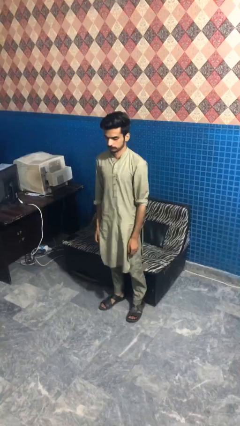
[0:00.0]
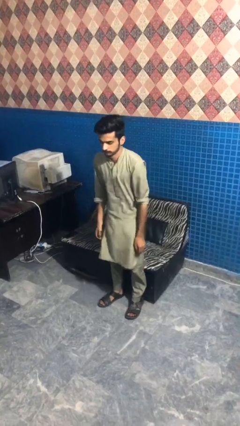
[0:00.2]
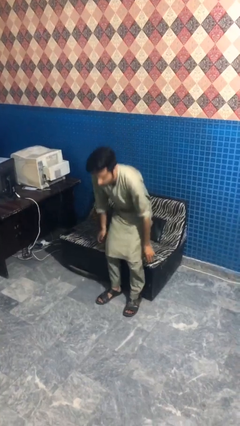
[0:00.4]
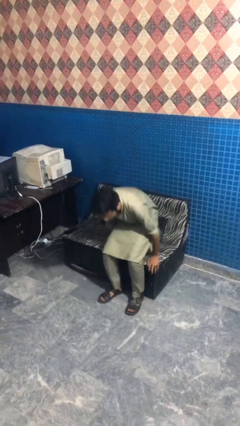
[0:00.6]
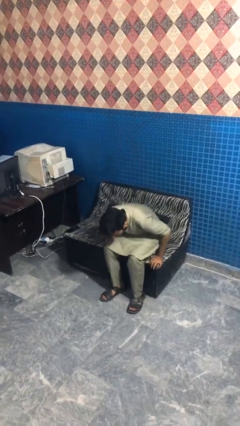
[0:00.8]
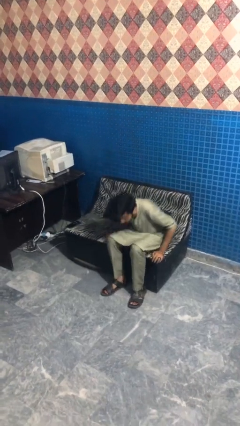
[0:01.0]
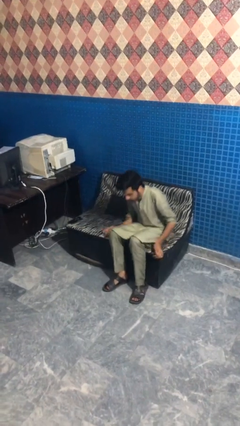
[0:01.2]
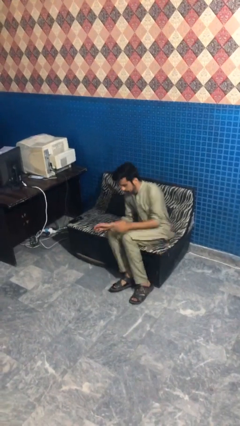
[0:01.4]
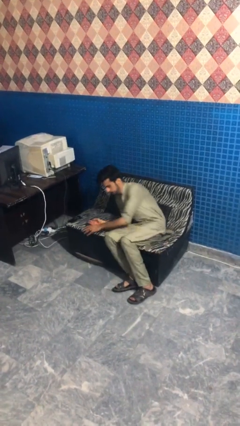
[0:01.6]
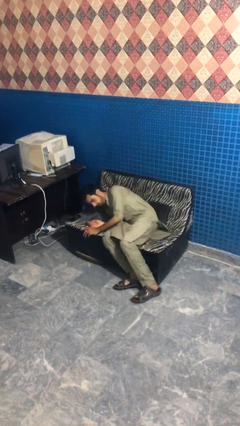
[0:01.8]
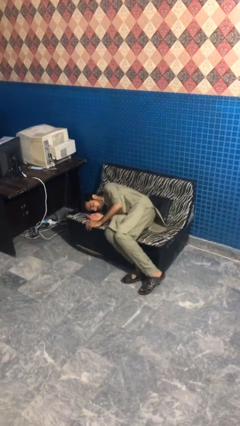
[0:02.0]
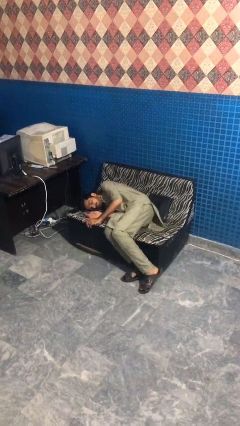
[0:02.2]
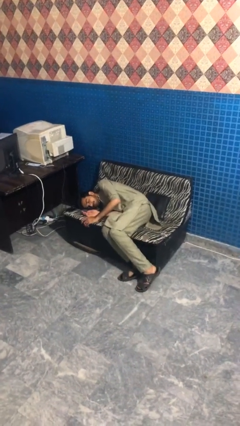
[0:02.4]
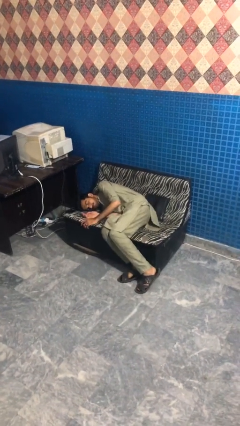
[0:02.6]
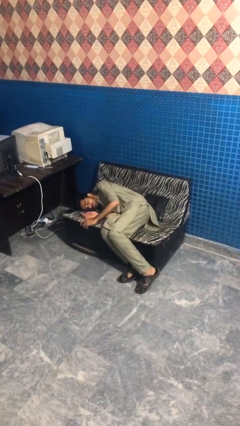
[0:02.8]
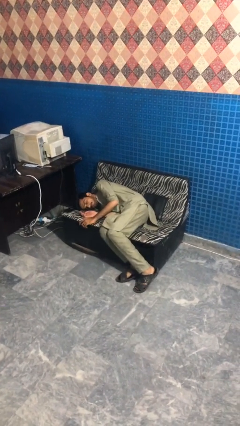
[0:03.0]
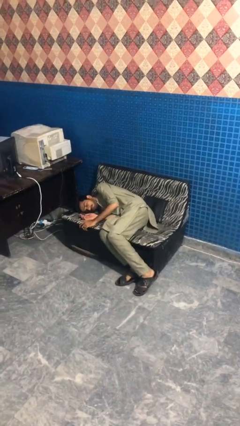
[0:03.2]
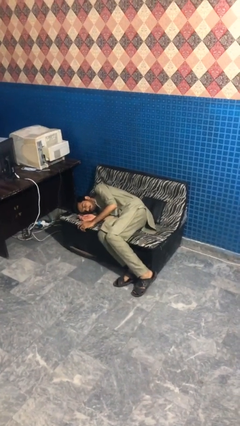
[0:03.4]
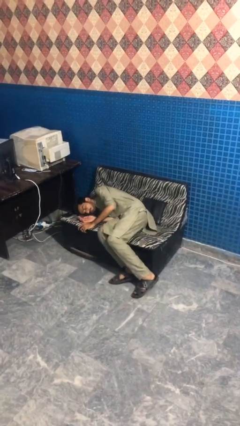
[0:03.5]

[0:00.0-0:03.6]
person lies down on couch

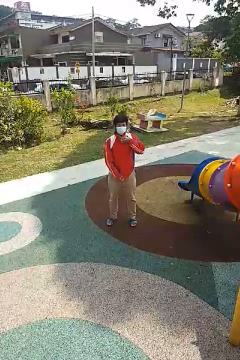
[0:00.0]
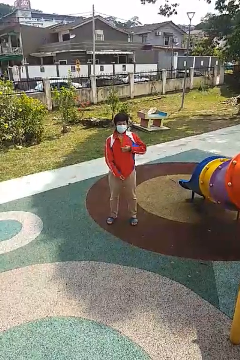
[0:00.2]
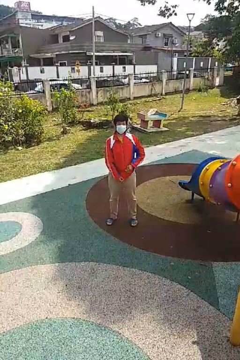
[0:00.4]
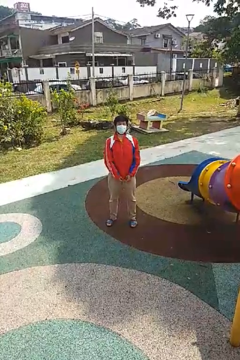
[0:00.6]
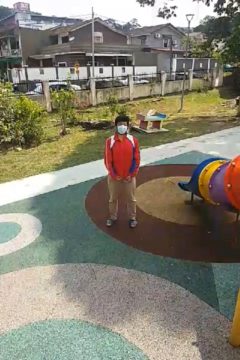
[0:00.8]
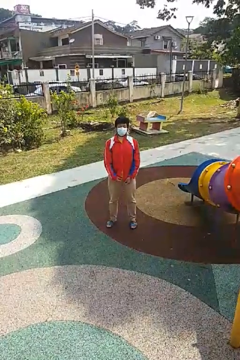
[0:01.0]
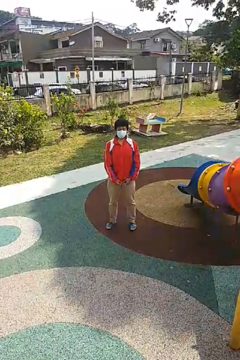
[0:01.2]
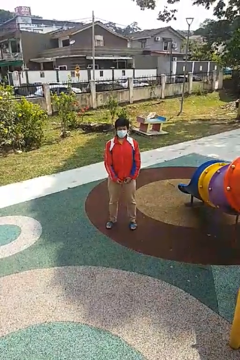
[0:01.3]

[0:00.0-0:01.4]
person unzips jacket

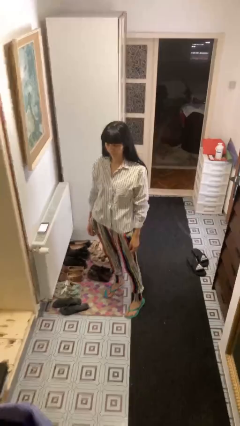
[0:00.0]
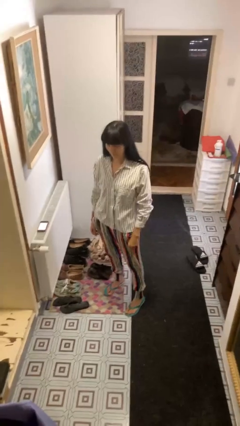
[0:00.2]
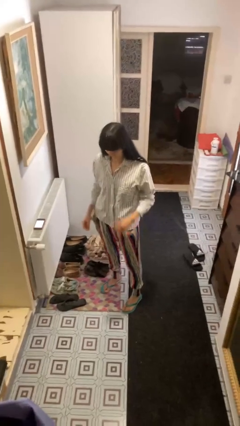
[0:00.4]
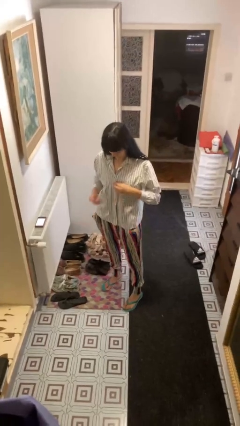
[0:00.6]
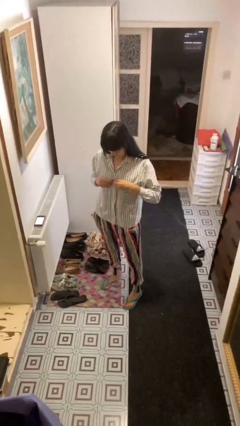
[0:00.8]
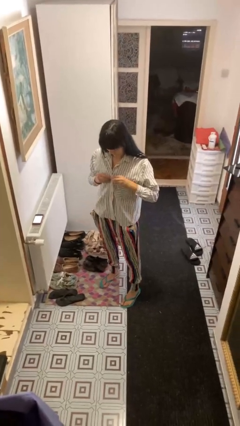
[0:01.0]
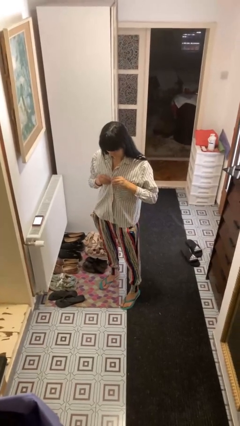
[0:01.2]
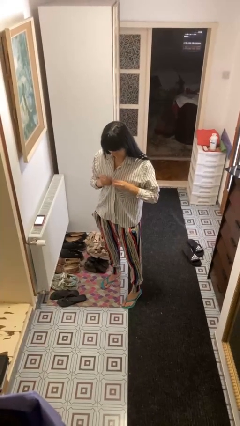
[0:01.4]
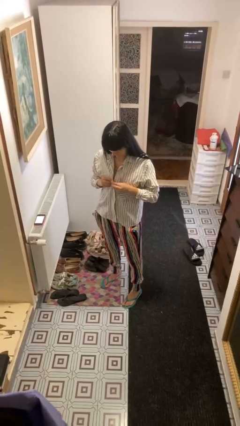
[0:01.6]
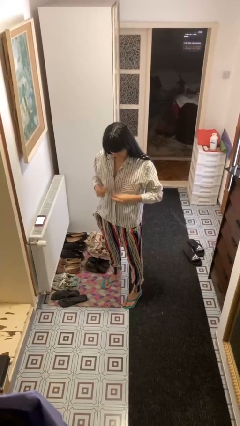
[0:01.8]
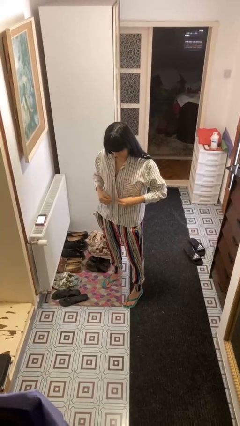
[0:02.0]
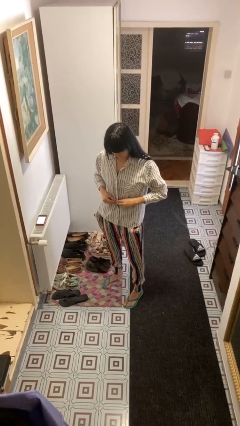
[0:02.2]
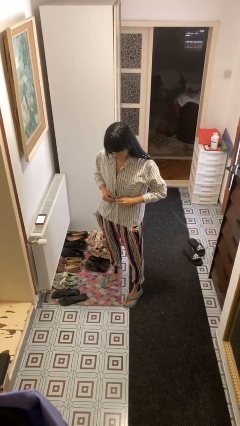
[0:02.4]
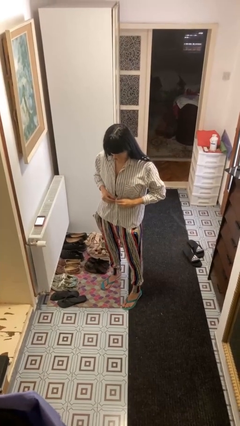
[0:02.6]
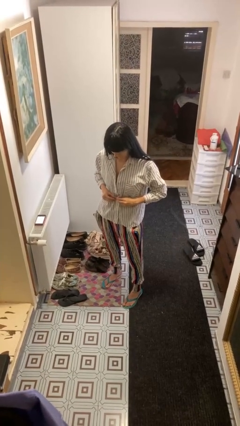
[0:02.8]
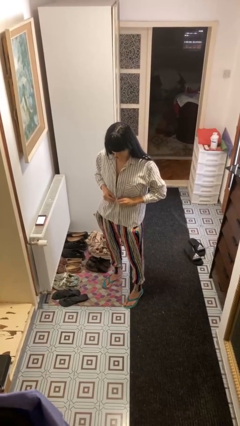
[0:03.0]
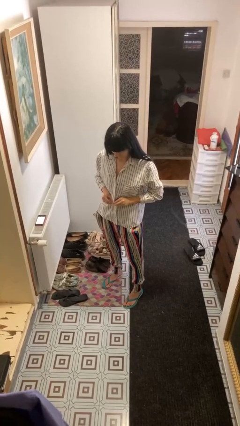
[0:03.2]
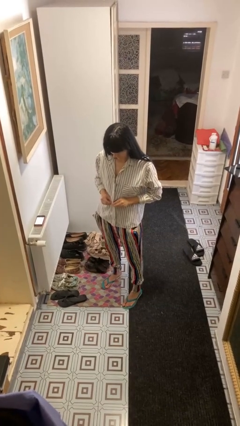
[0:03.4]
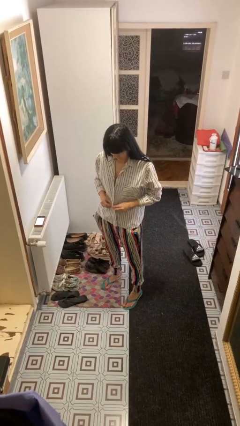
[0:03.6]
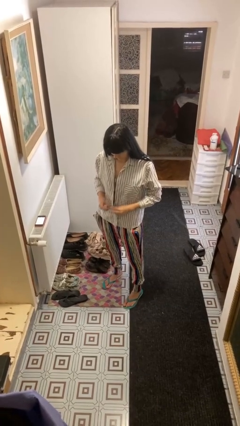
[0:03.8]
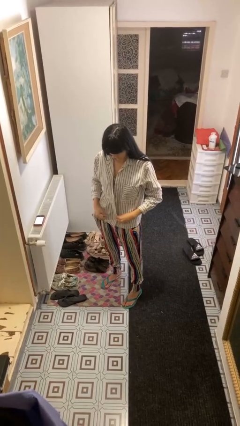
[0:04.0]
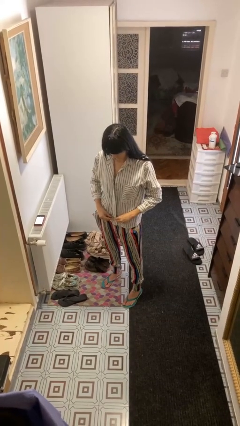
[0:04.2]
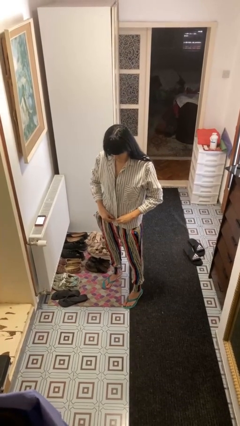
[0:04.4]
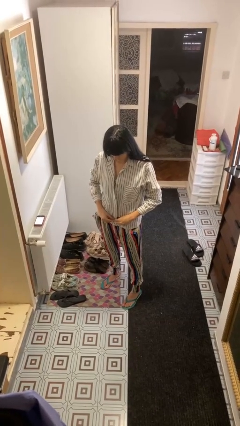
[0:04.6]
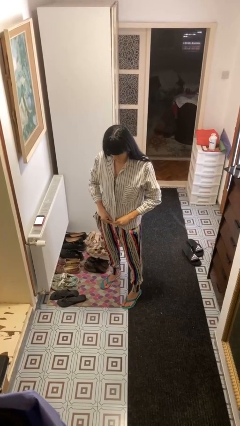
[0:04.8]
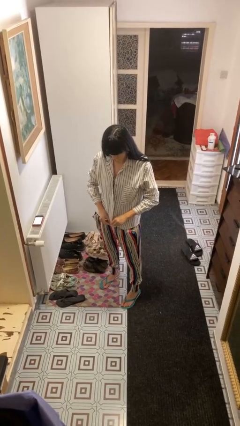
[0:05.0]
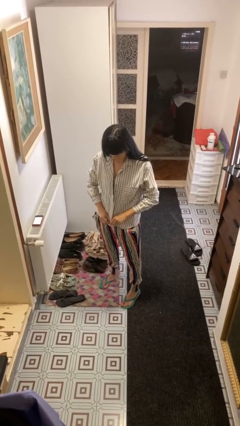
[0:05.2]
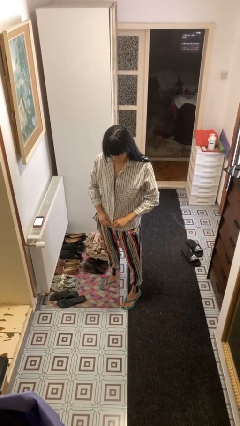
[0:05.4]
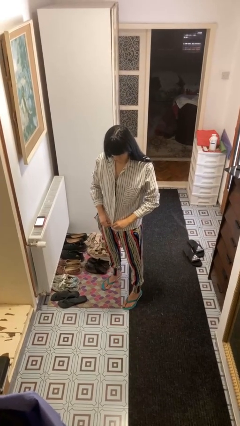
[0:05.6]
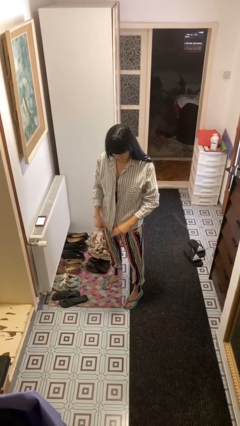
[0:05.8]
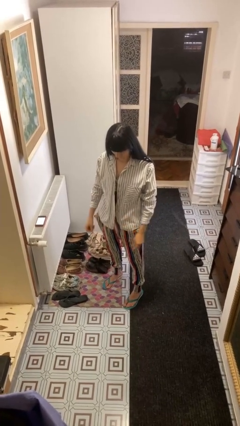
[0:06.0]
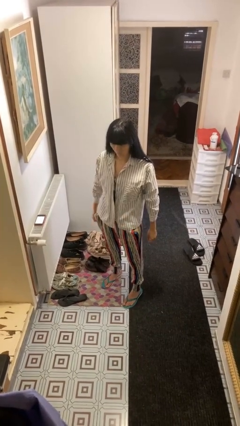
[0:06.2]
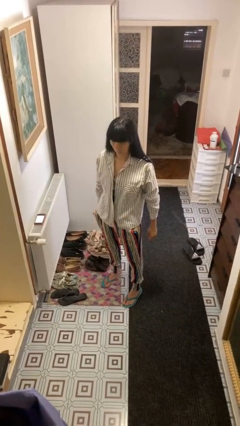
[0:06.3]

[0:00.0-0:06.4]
person unbuttons shirt

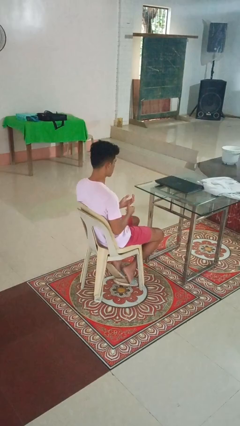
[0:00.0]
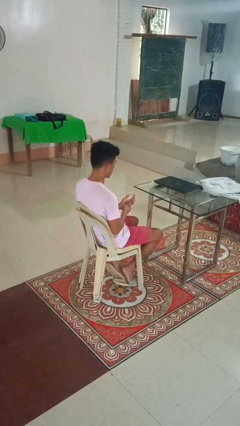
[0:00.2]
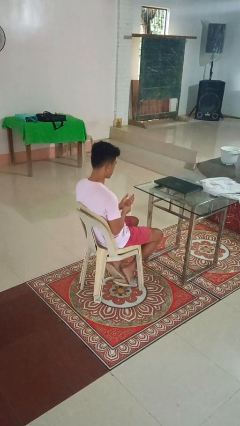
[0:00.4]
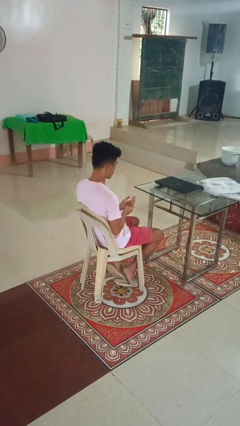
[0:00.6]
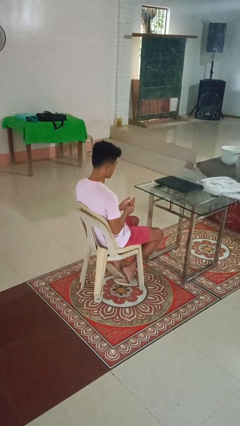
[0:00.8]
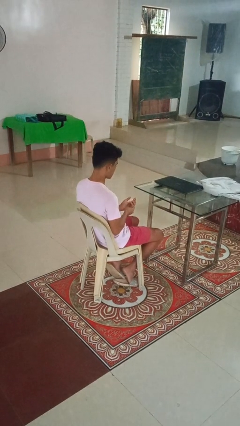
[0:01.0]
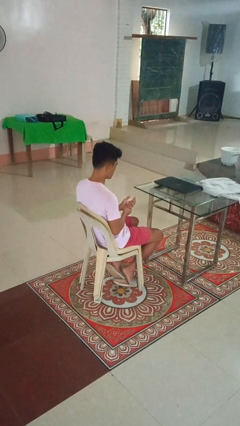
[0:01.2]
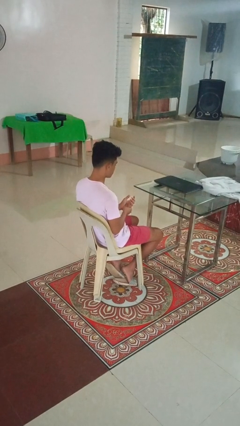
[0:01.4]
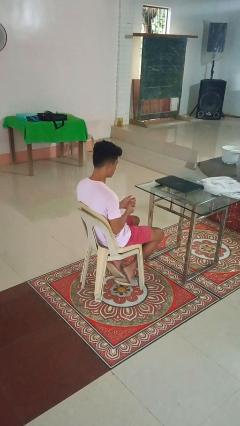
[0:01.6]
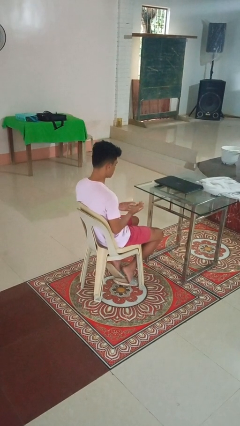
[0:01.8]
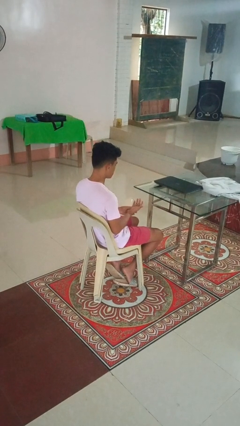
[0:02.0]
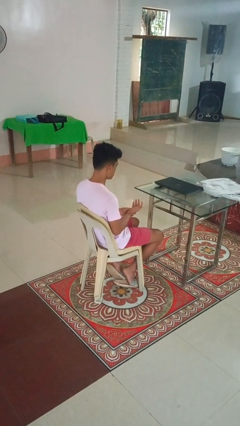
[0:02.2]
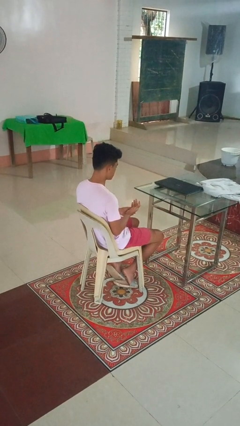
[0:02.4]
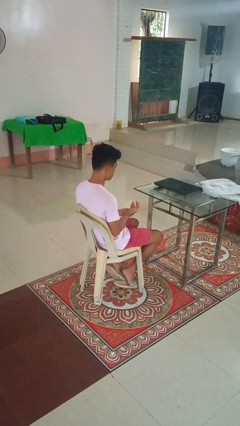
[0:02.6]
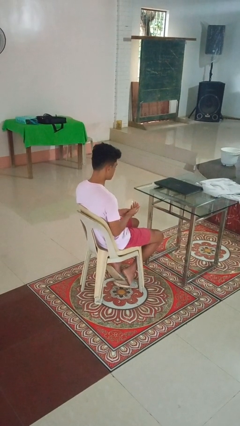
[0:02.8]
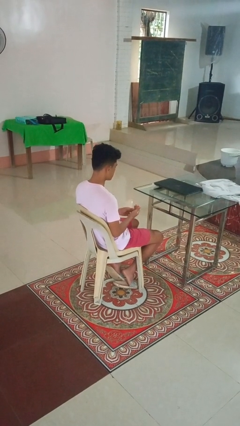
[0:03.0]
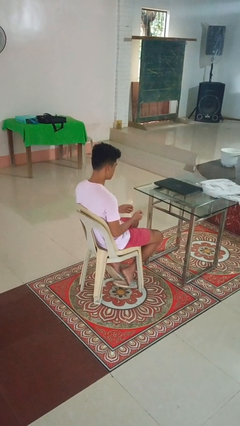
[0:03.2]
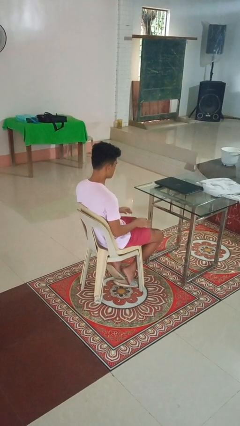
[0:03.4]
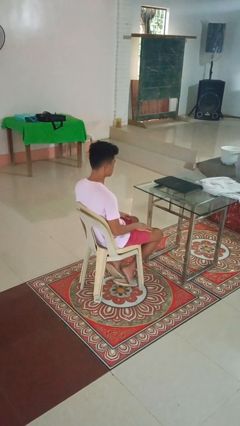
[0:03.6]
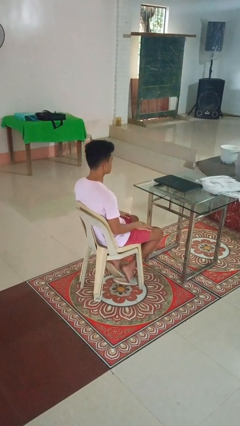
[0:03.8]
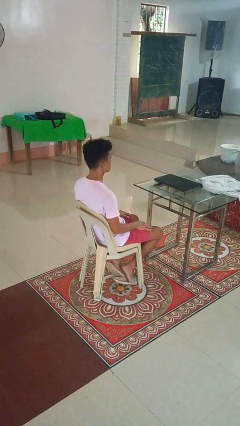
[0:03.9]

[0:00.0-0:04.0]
person looks at hands in lap

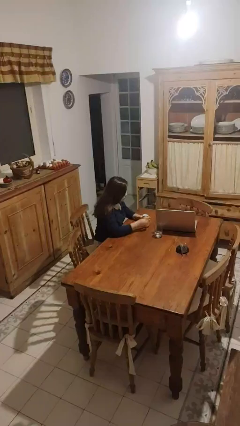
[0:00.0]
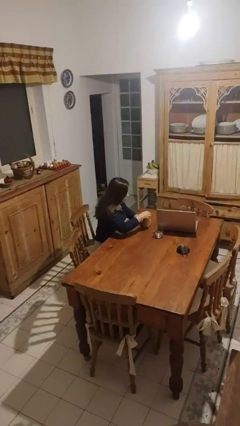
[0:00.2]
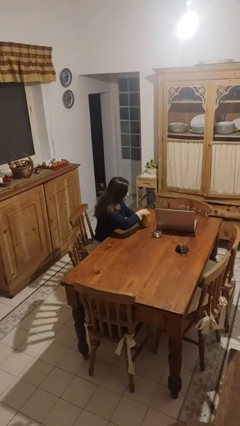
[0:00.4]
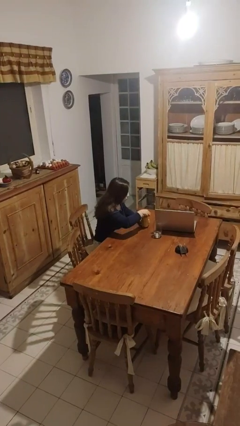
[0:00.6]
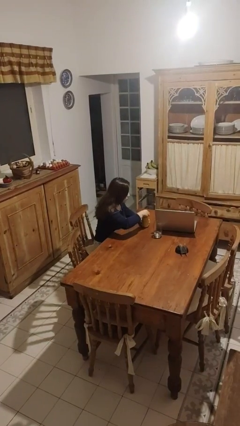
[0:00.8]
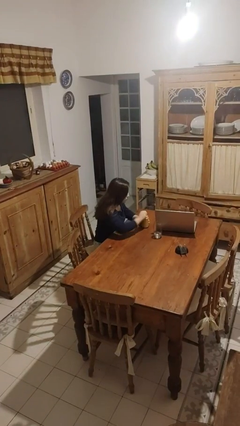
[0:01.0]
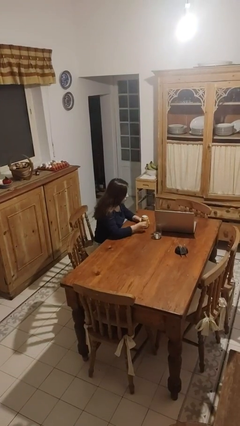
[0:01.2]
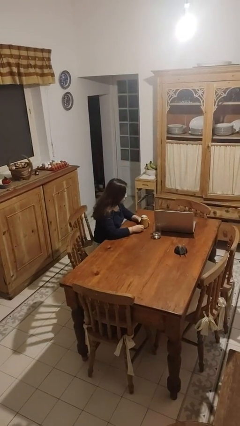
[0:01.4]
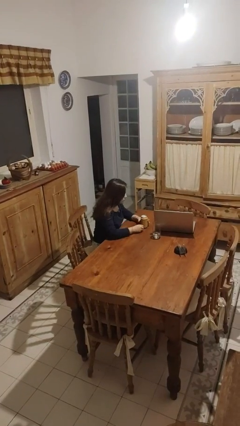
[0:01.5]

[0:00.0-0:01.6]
person opens beverage can

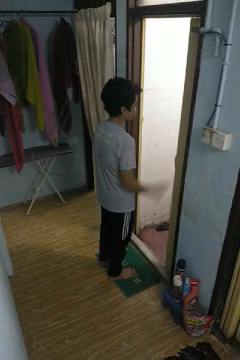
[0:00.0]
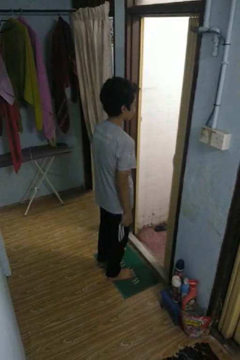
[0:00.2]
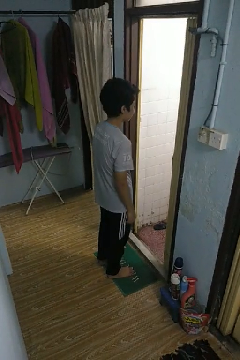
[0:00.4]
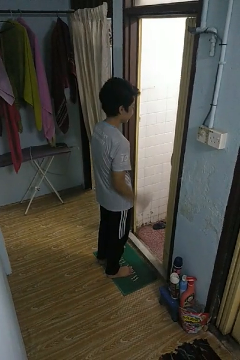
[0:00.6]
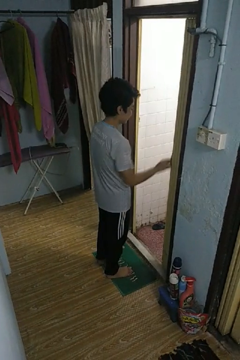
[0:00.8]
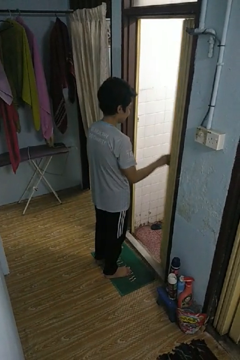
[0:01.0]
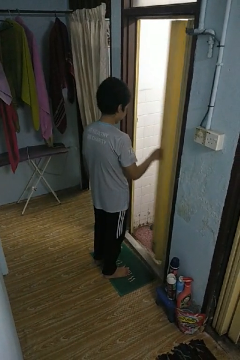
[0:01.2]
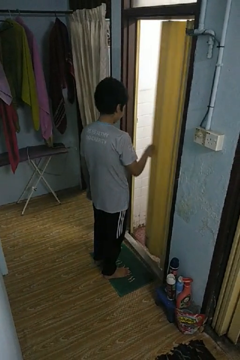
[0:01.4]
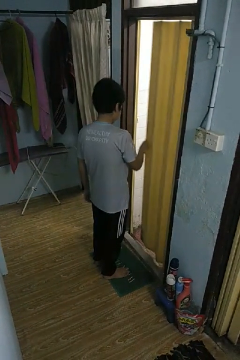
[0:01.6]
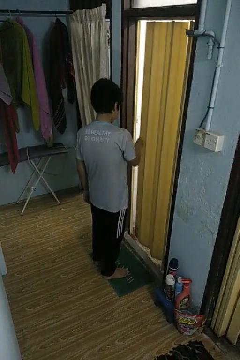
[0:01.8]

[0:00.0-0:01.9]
person closes sliding door
